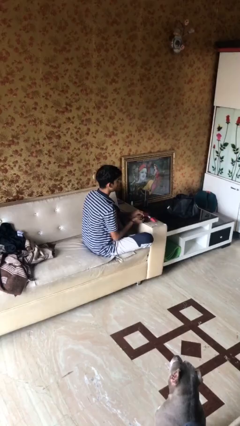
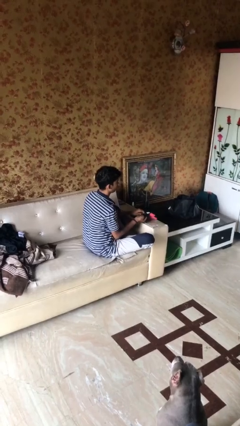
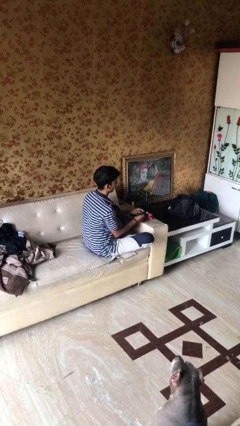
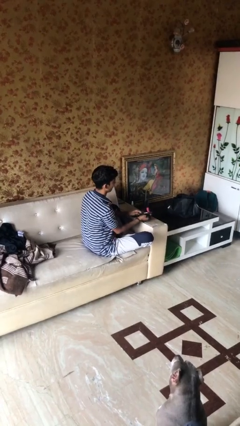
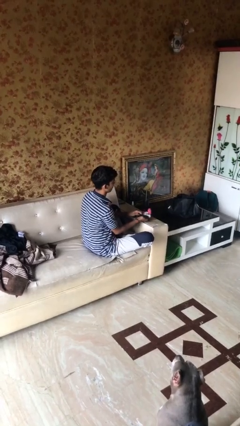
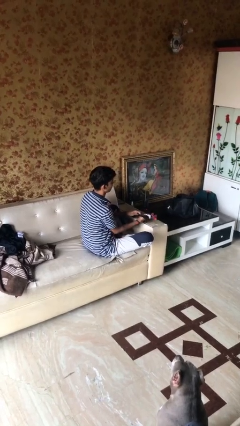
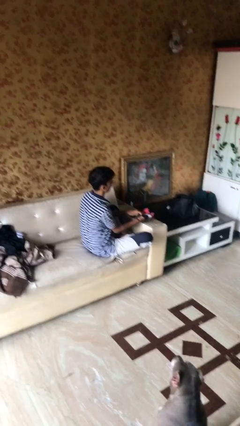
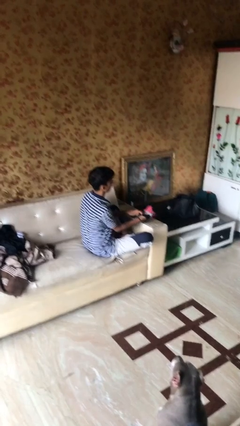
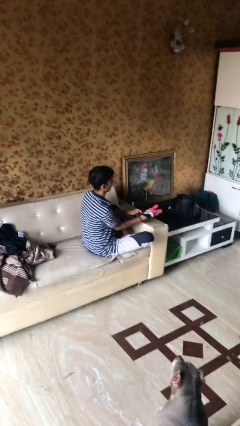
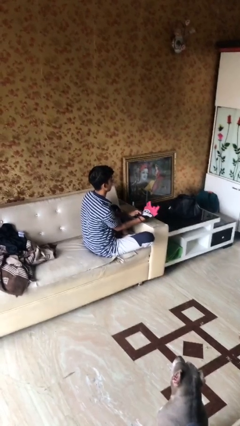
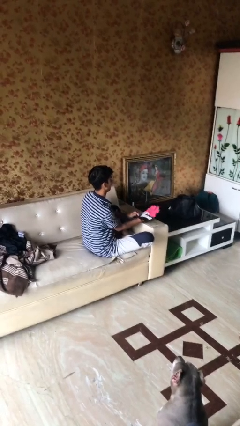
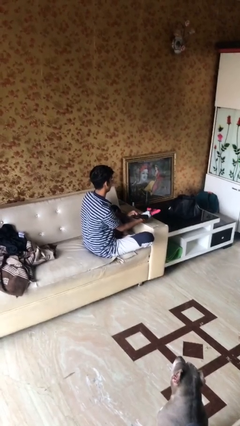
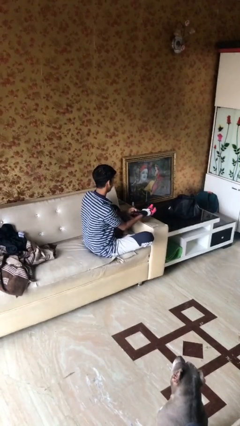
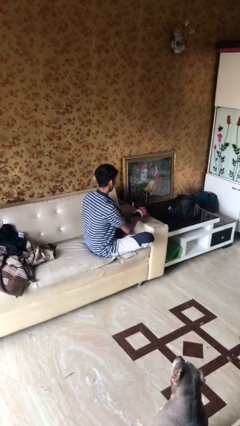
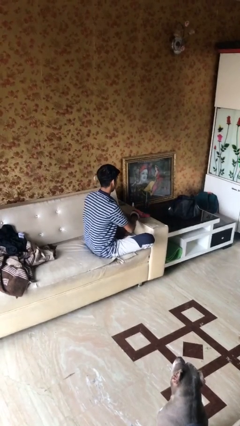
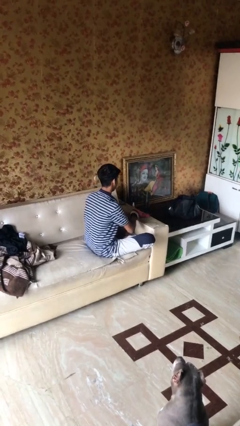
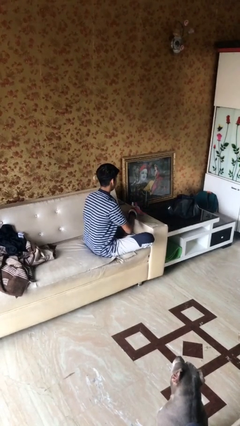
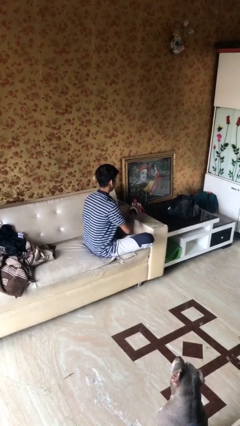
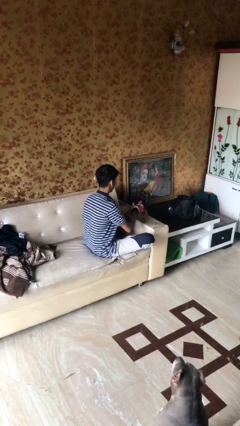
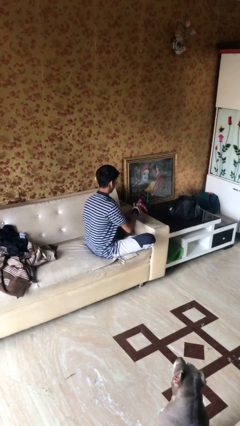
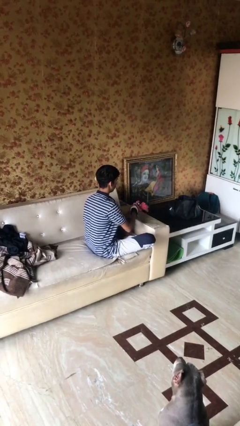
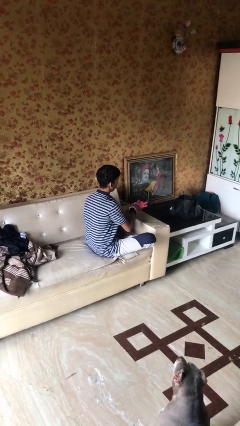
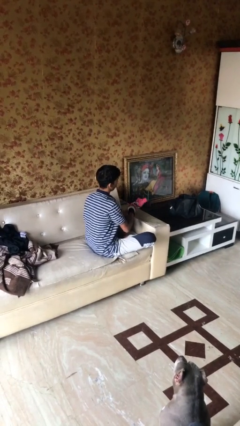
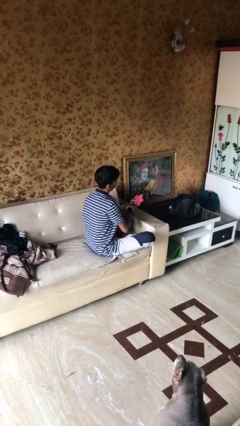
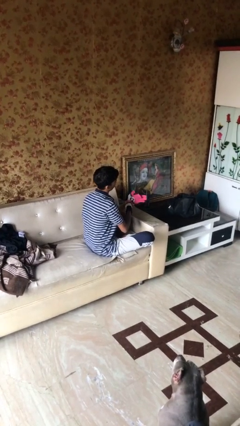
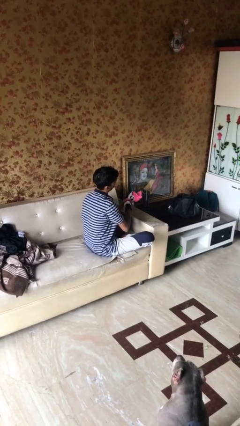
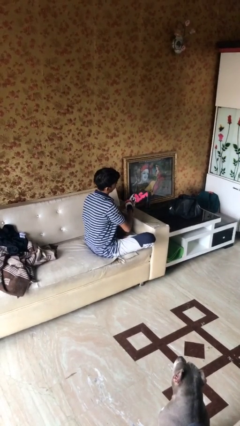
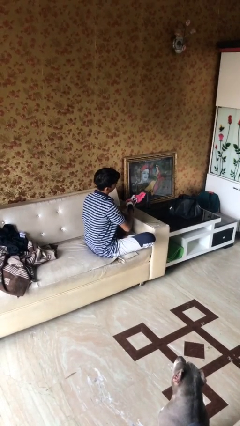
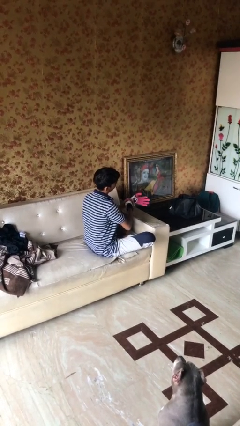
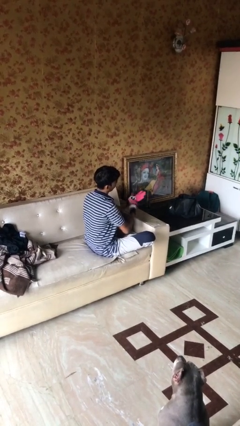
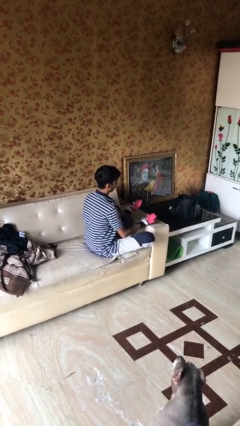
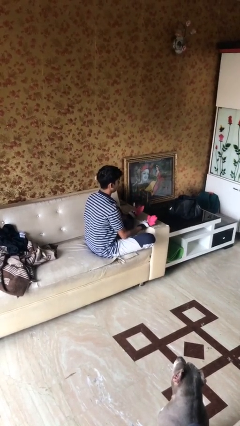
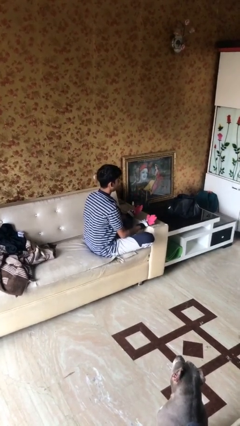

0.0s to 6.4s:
person puts on gloves

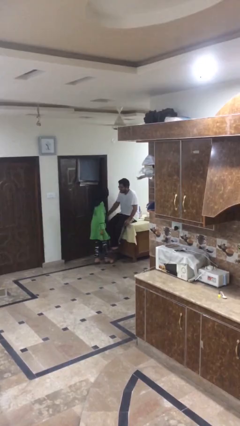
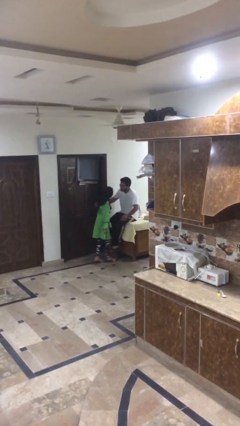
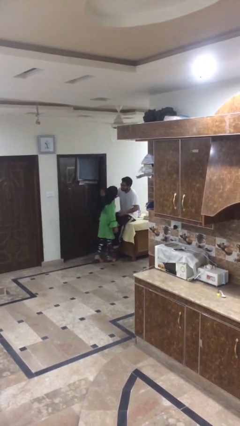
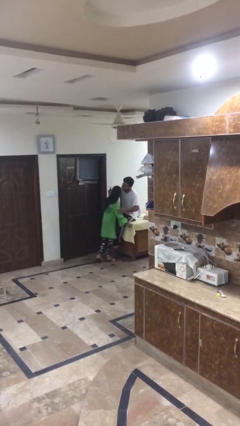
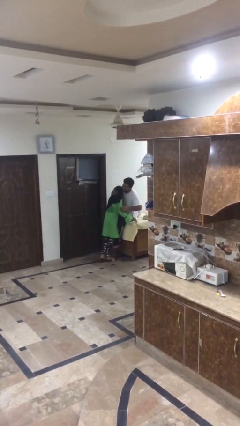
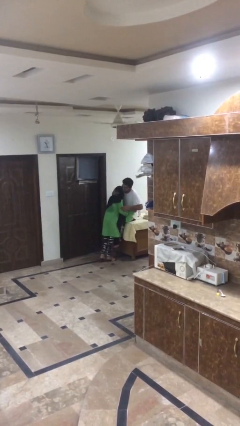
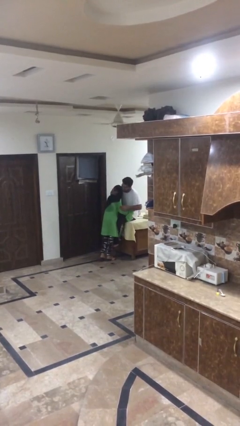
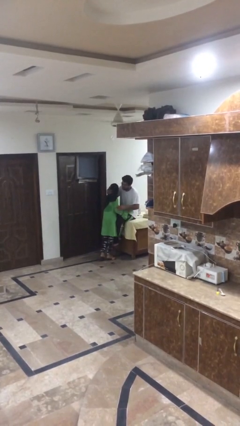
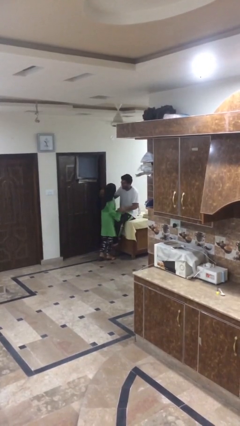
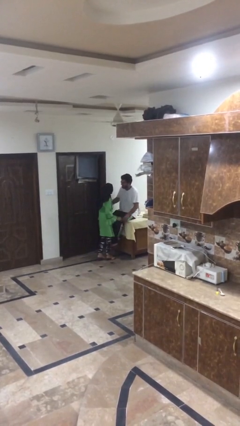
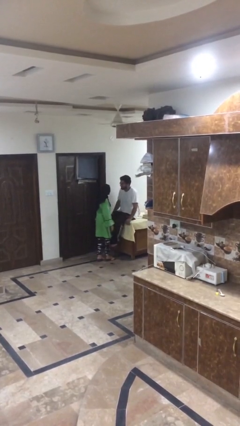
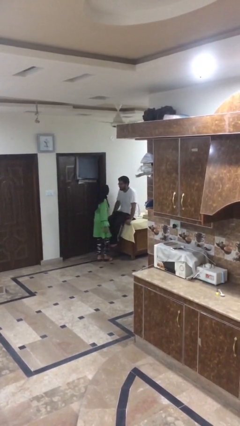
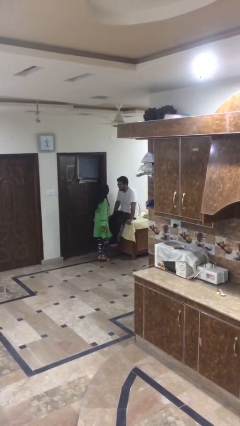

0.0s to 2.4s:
person embraces person

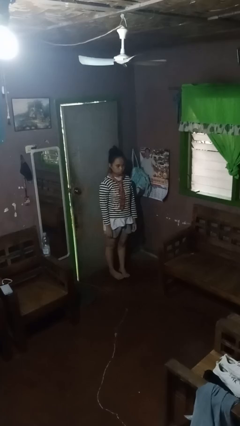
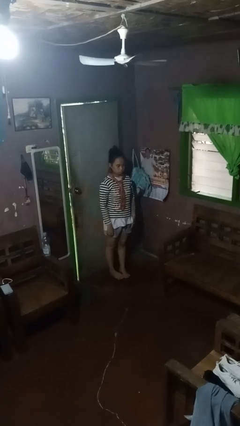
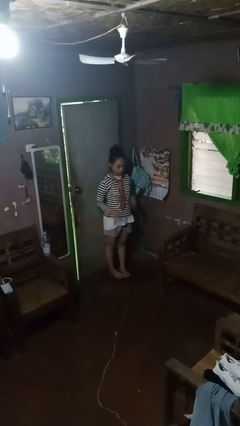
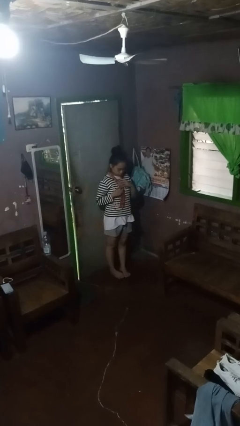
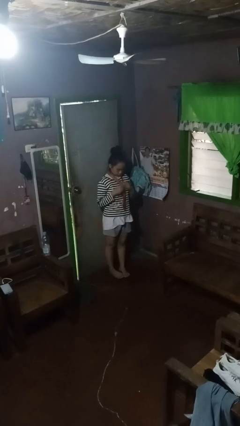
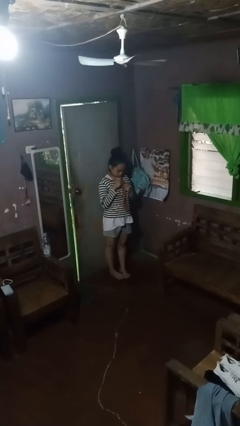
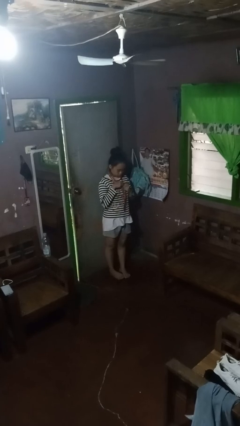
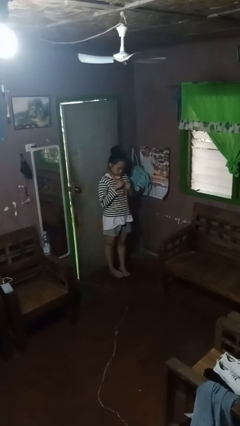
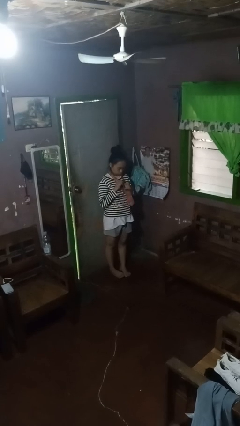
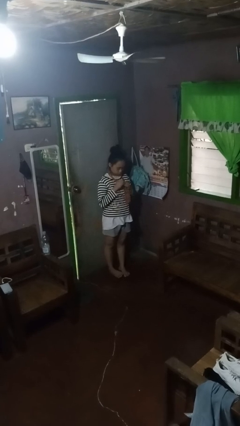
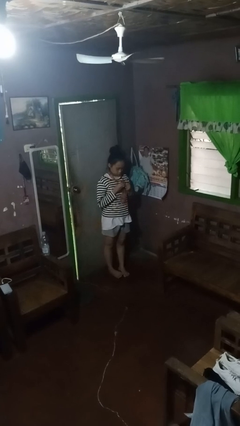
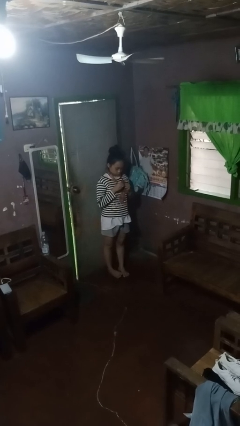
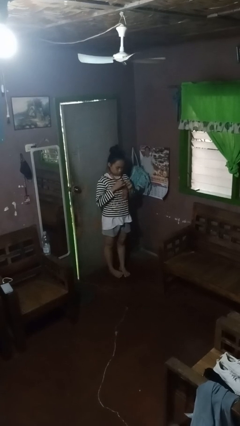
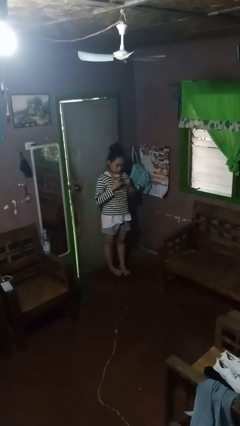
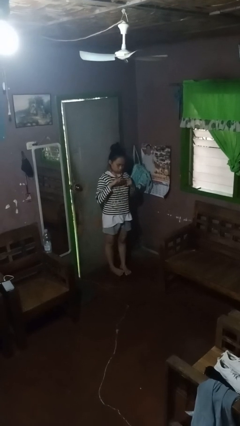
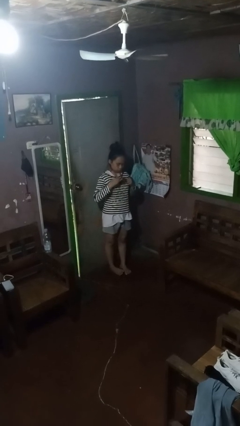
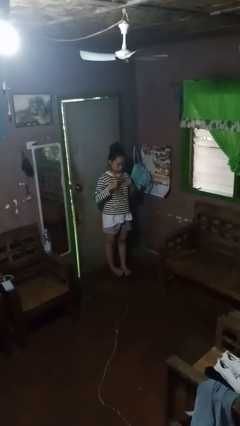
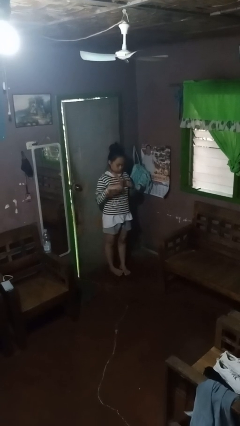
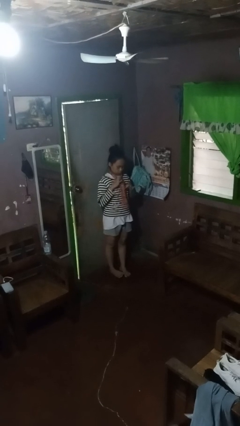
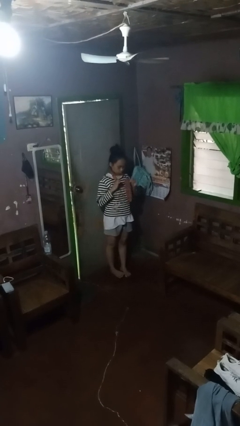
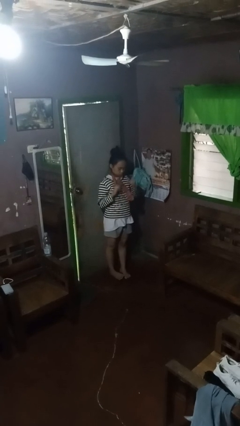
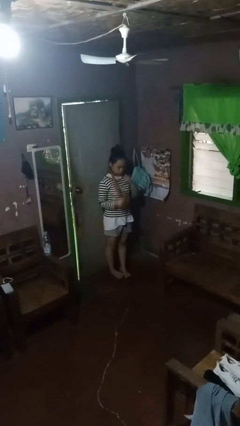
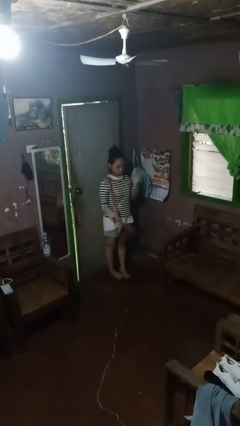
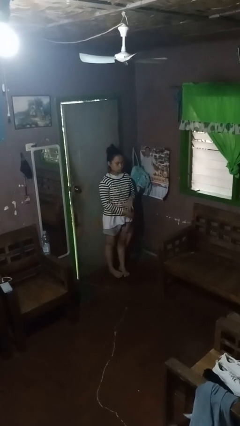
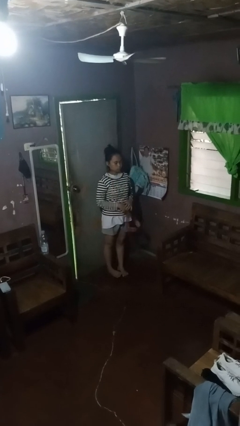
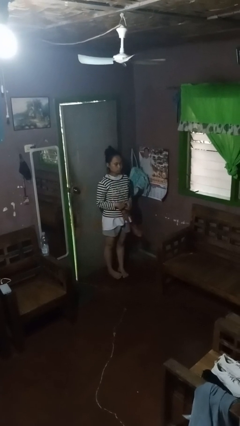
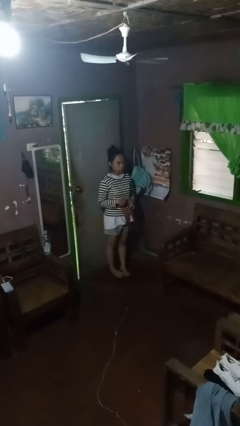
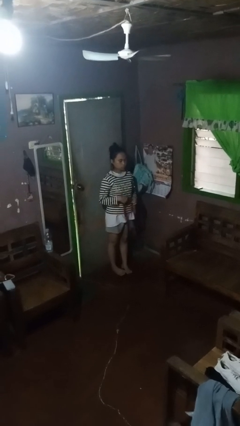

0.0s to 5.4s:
person takes off necktie

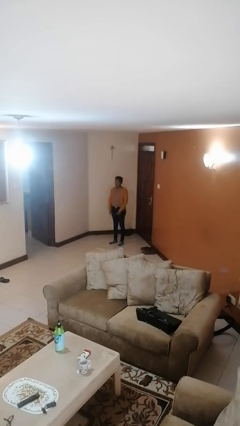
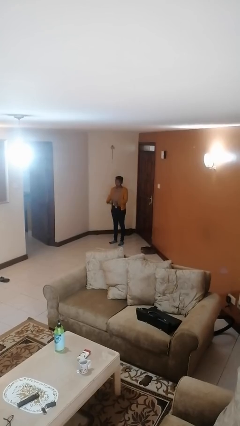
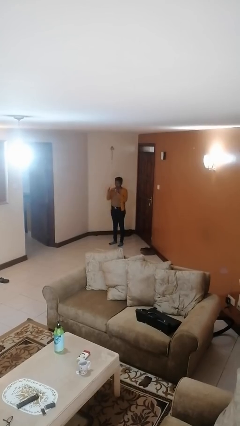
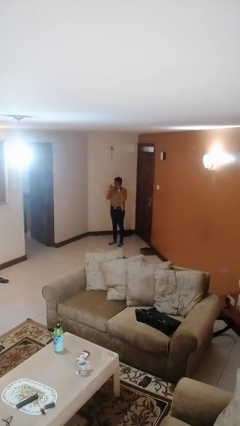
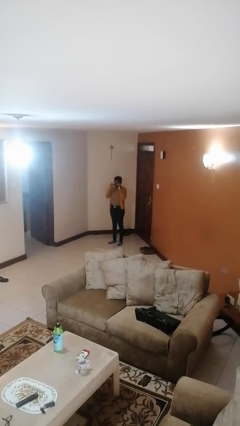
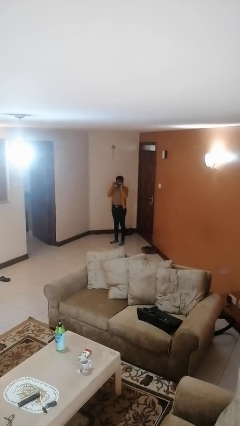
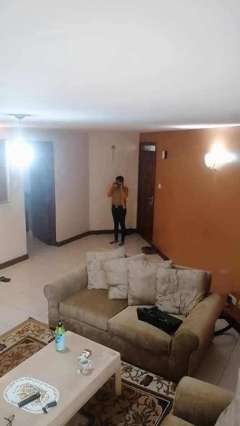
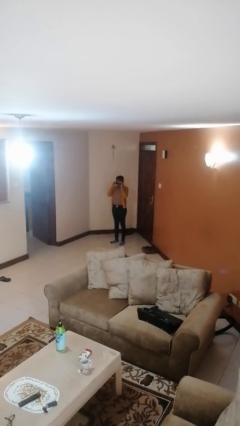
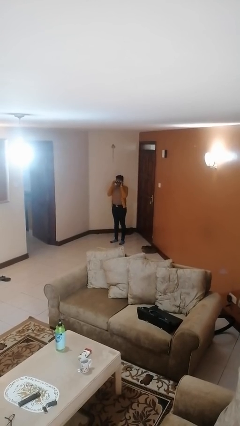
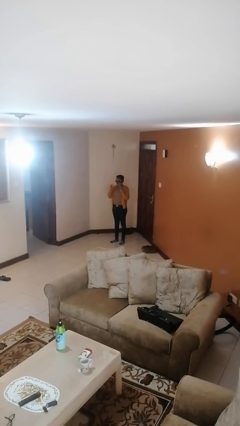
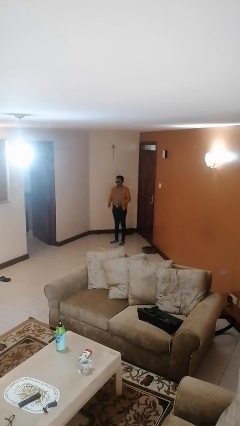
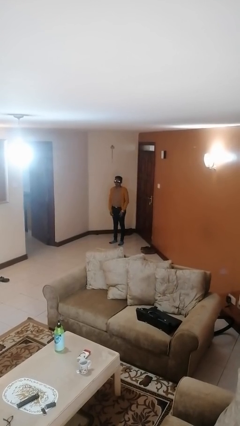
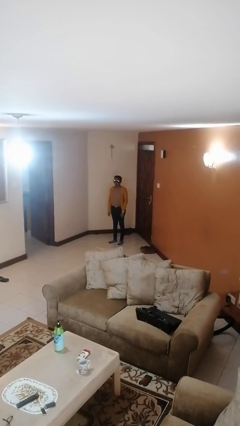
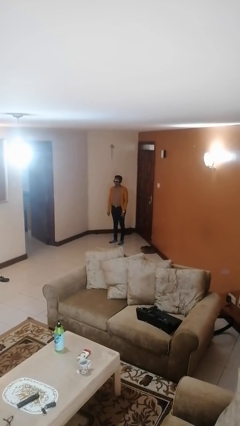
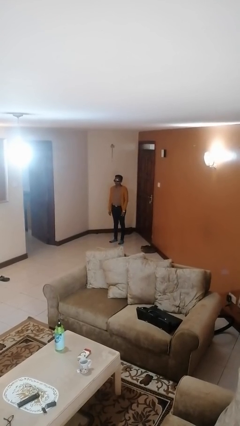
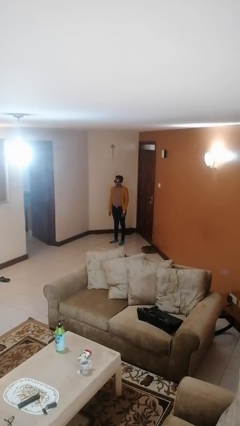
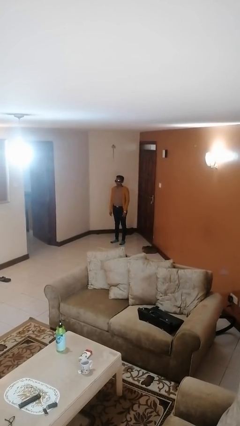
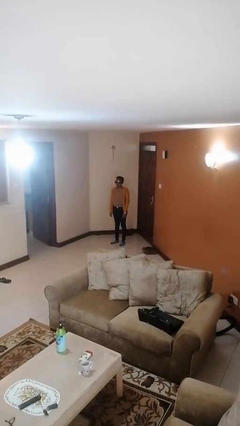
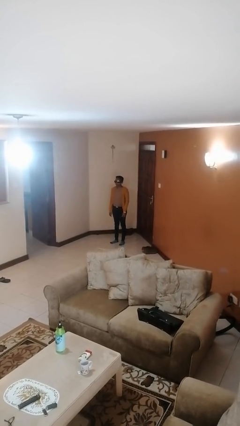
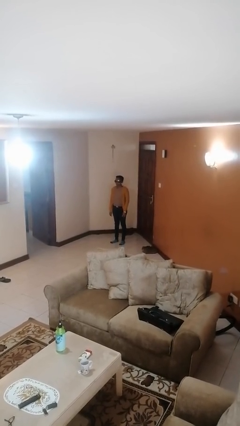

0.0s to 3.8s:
person puts on sunglasses
